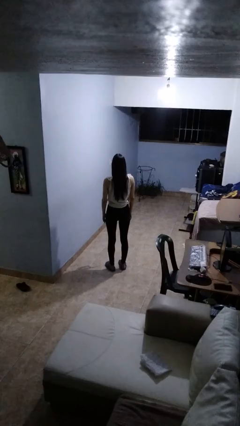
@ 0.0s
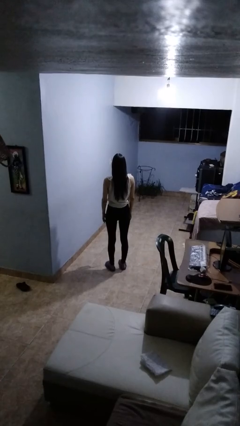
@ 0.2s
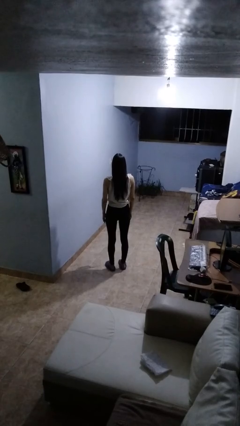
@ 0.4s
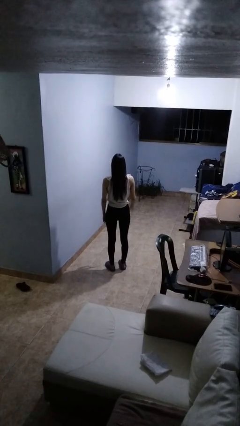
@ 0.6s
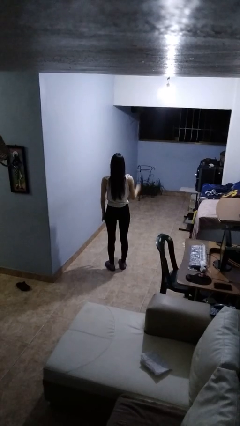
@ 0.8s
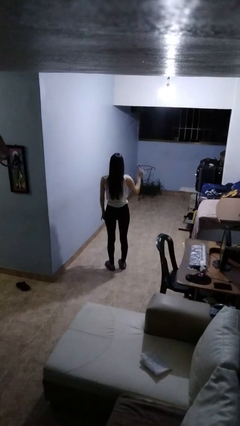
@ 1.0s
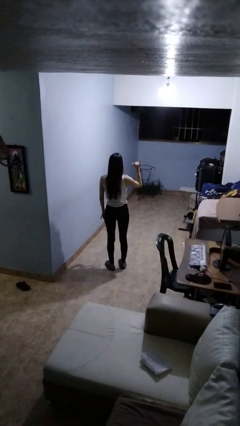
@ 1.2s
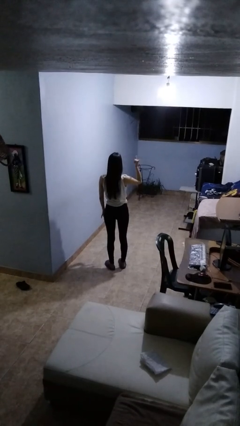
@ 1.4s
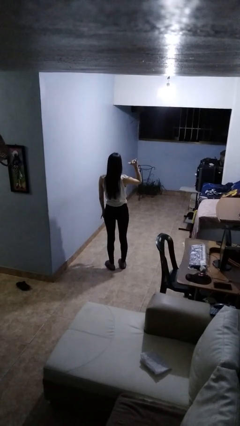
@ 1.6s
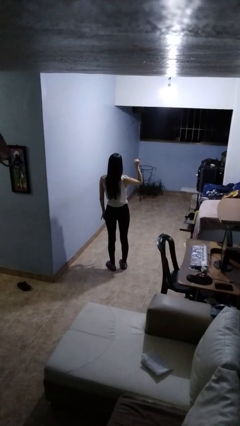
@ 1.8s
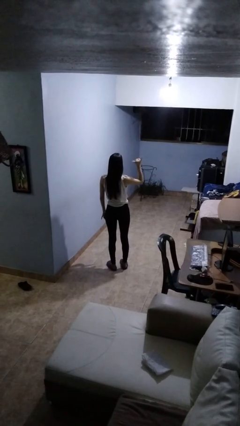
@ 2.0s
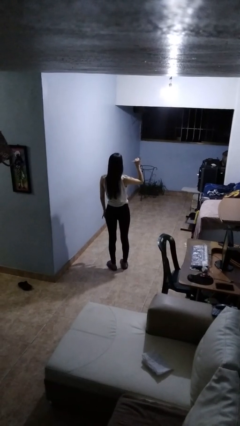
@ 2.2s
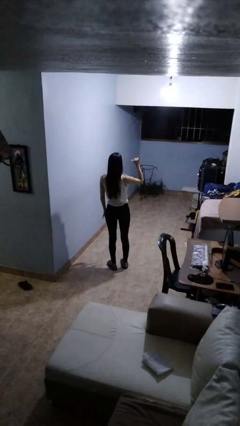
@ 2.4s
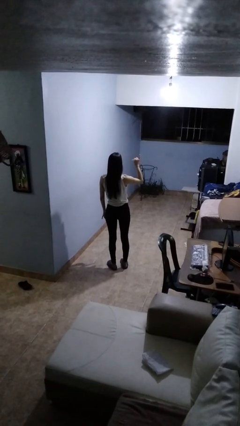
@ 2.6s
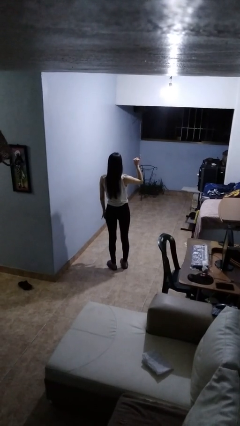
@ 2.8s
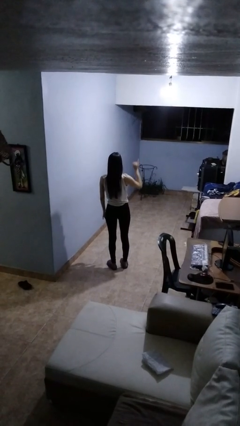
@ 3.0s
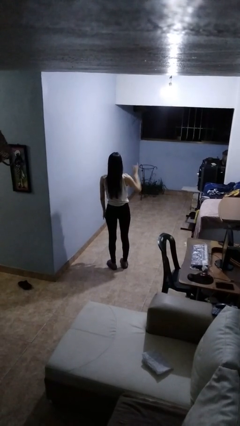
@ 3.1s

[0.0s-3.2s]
person gestures hang loose

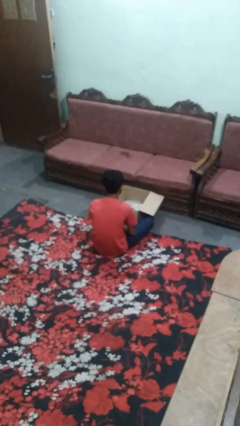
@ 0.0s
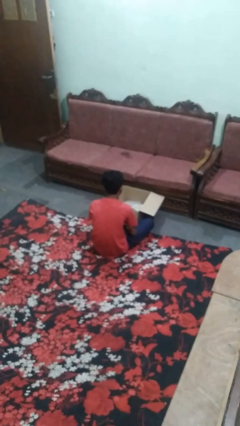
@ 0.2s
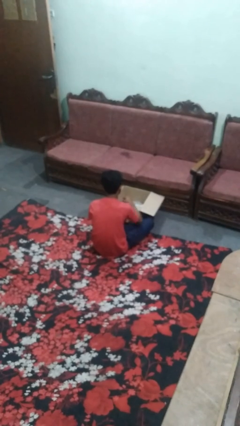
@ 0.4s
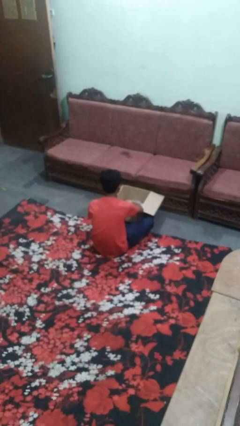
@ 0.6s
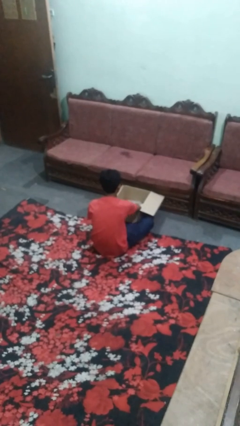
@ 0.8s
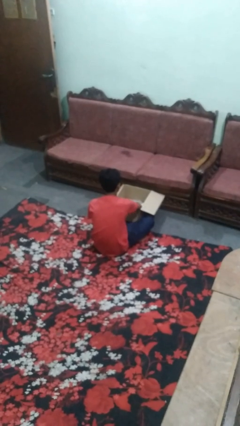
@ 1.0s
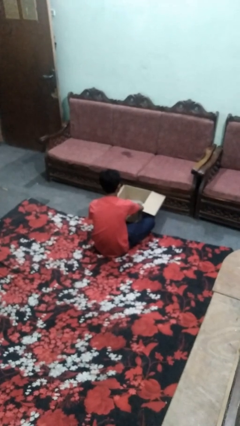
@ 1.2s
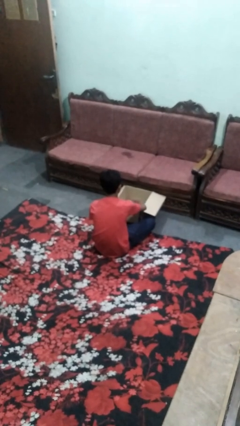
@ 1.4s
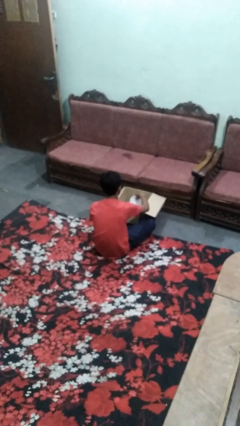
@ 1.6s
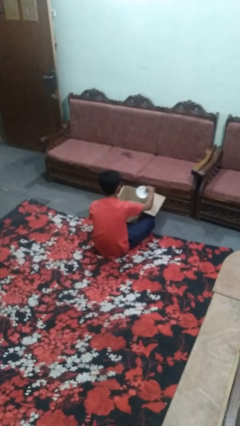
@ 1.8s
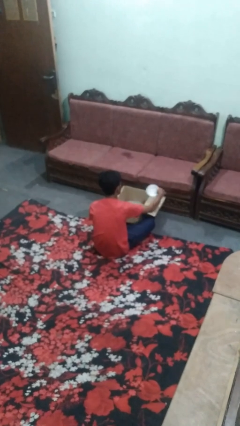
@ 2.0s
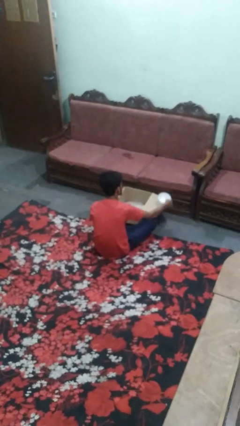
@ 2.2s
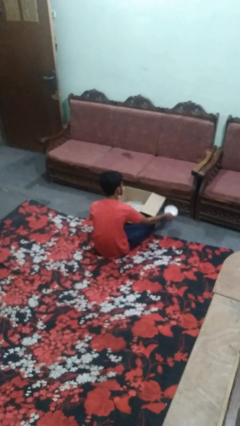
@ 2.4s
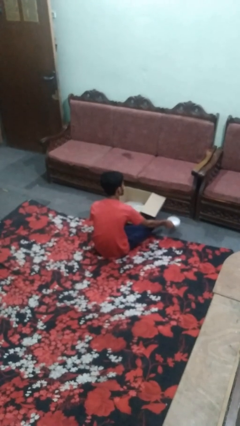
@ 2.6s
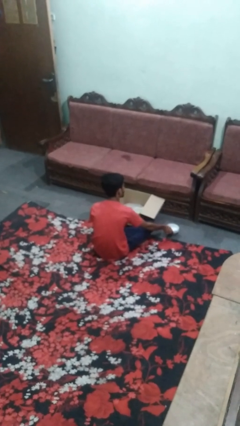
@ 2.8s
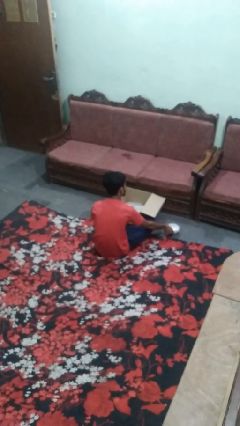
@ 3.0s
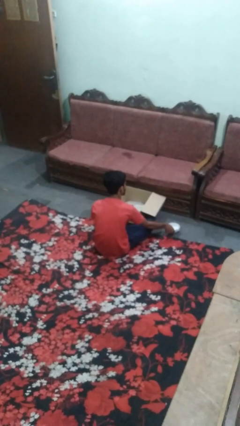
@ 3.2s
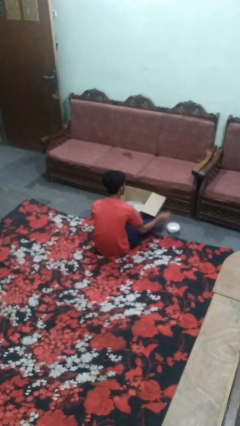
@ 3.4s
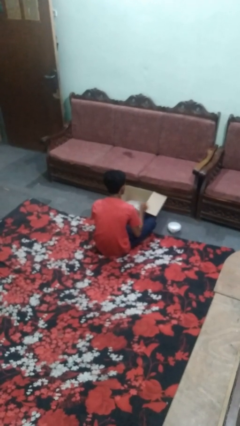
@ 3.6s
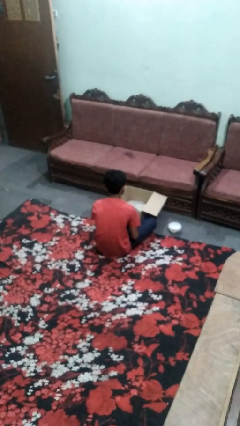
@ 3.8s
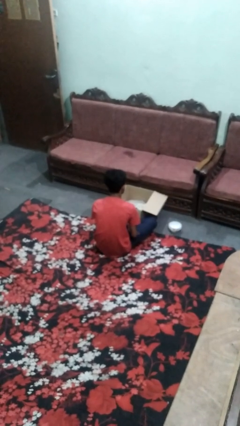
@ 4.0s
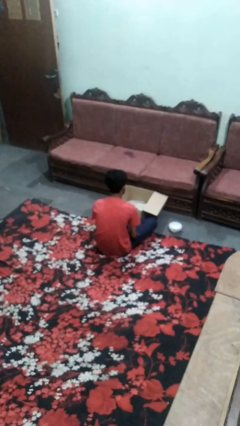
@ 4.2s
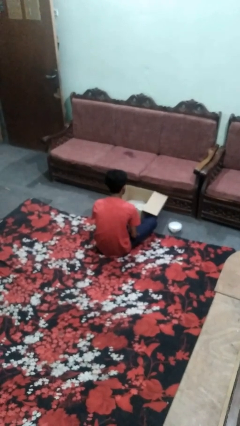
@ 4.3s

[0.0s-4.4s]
person takes object from box

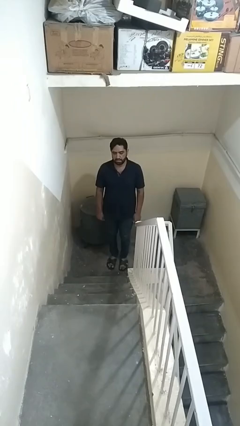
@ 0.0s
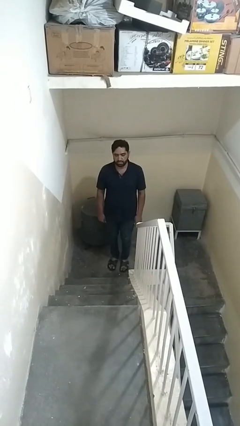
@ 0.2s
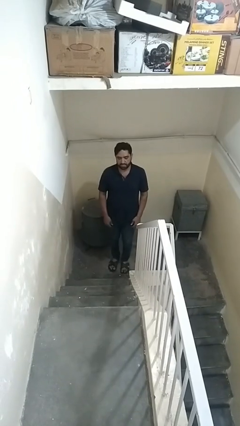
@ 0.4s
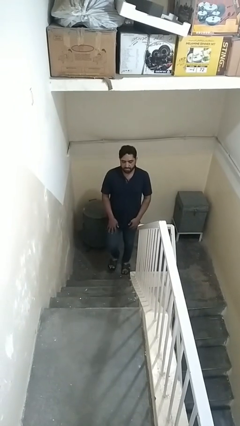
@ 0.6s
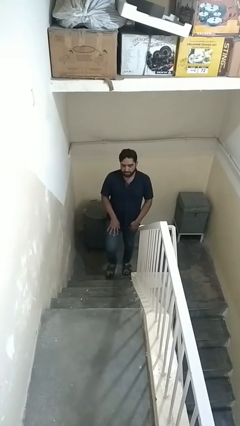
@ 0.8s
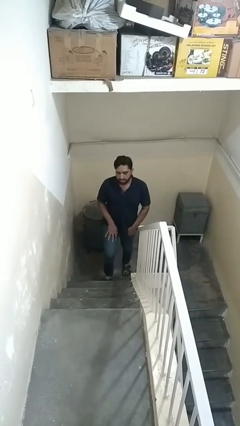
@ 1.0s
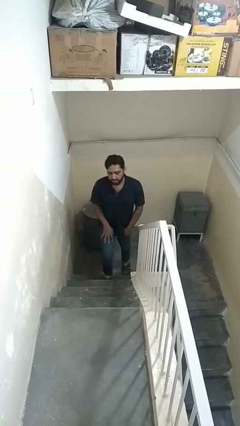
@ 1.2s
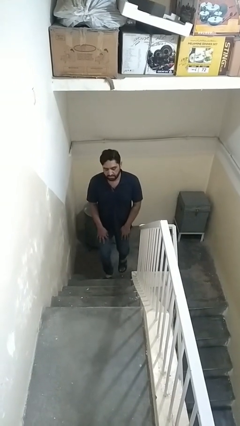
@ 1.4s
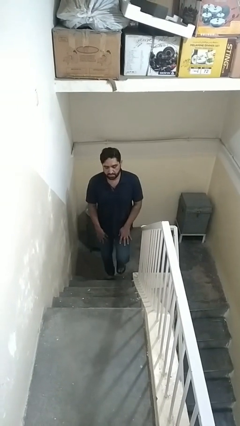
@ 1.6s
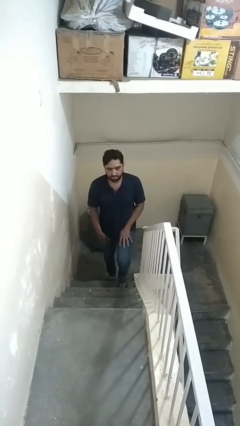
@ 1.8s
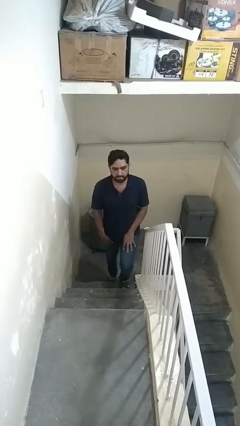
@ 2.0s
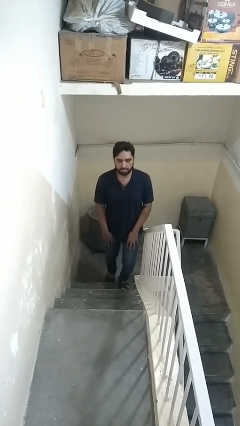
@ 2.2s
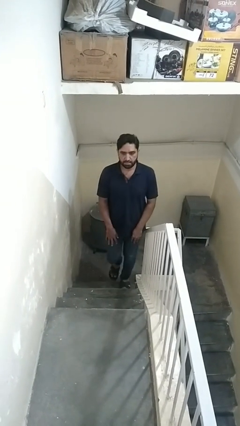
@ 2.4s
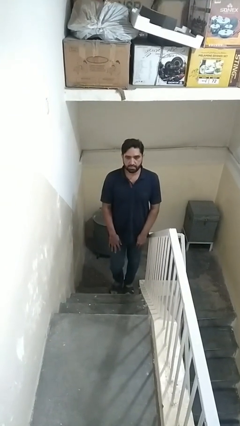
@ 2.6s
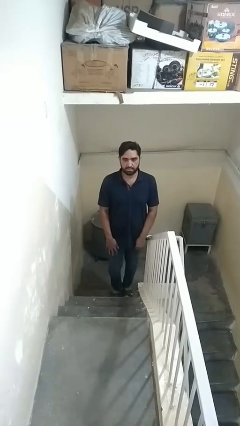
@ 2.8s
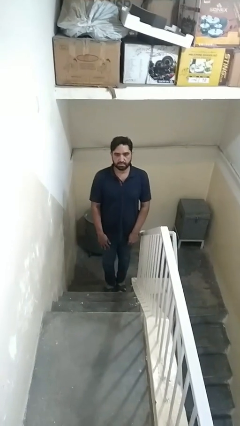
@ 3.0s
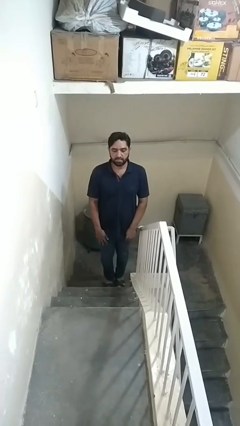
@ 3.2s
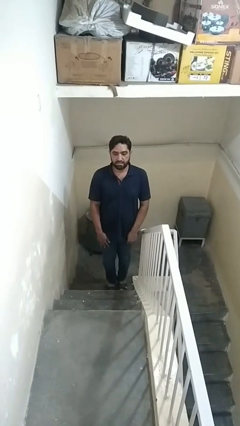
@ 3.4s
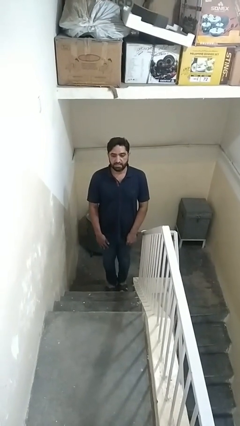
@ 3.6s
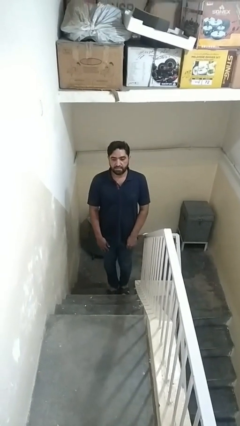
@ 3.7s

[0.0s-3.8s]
person climbs up stairs

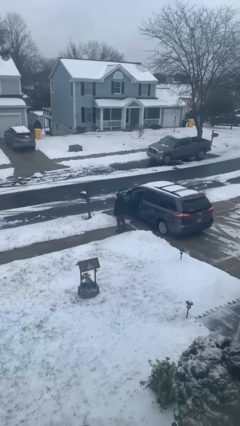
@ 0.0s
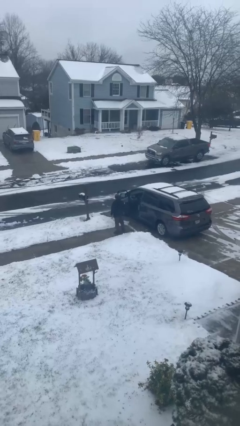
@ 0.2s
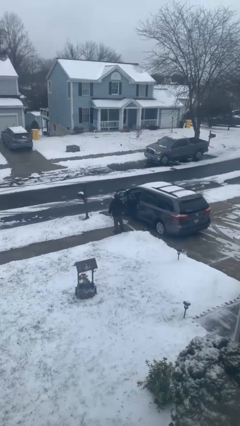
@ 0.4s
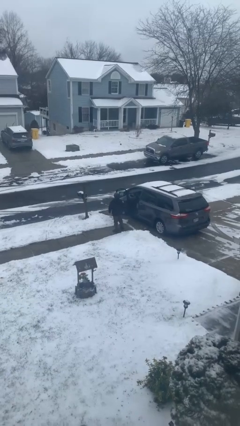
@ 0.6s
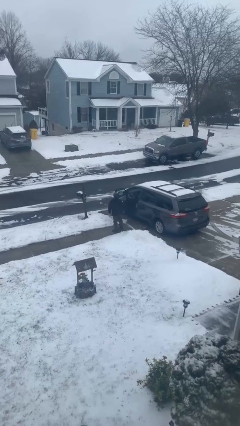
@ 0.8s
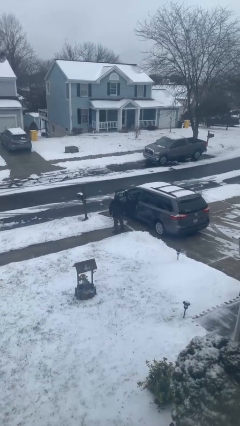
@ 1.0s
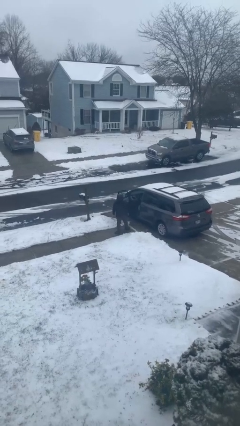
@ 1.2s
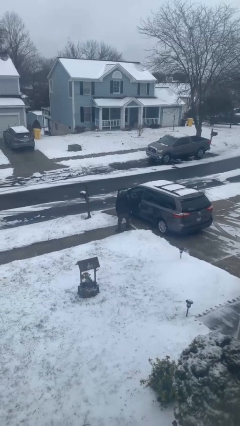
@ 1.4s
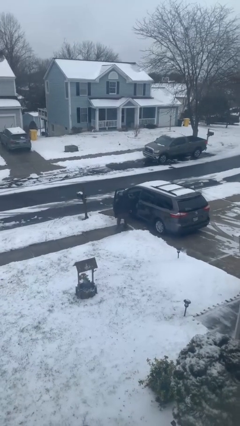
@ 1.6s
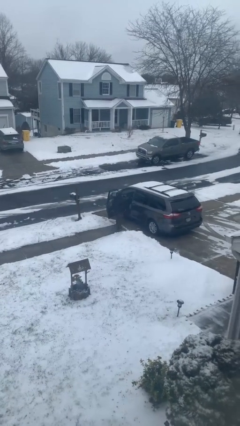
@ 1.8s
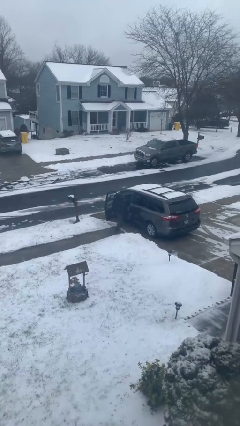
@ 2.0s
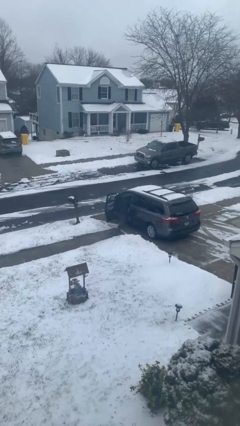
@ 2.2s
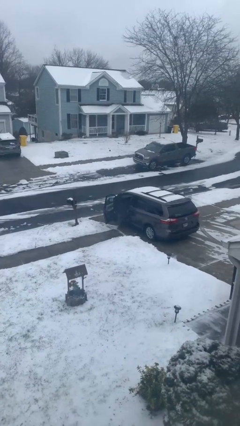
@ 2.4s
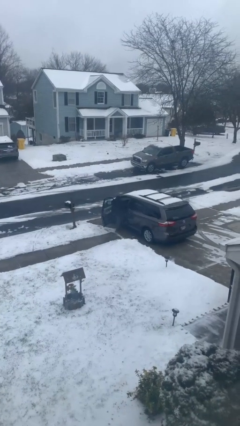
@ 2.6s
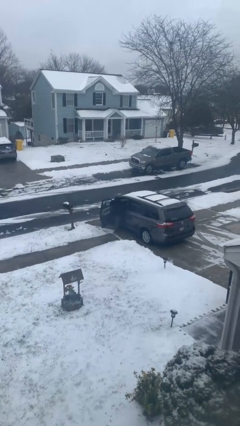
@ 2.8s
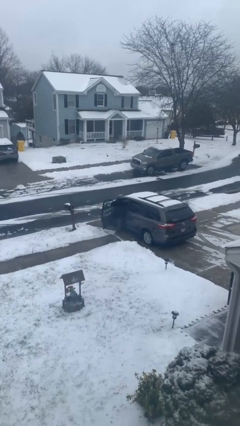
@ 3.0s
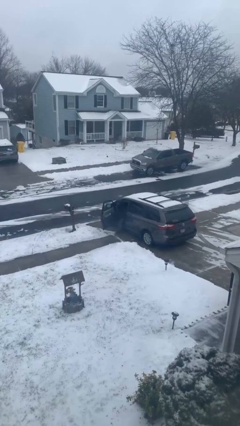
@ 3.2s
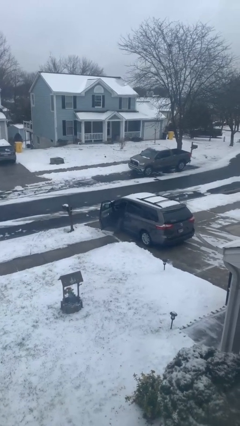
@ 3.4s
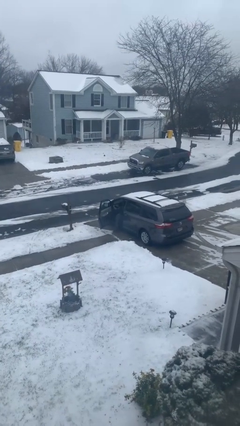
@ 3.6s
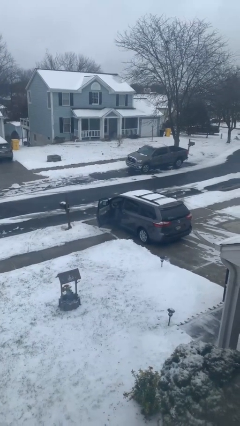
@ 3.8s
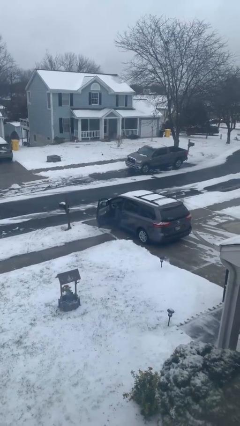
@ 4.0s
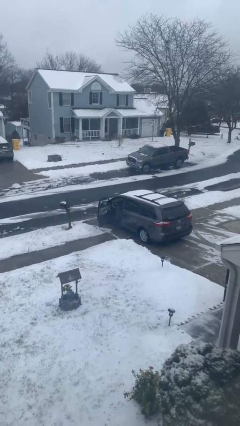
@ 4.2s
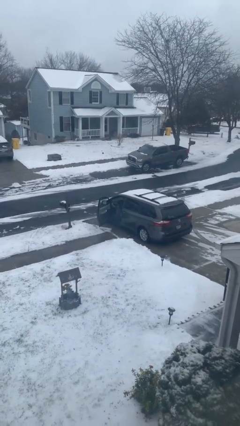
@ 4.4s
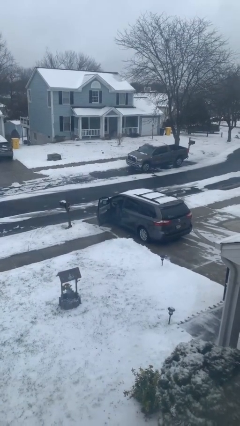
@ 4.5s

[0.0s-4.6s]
person enters car

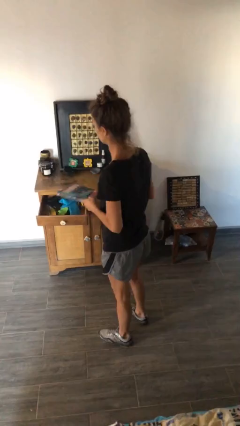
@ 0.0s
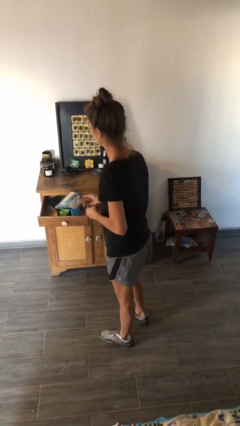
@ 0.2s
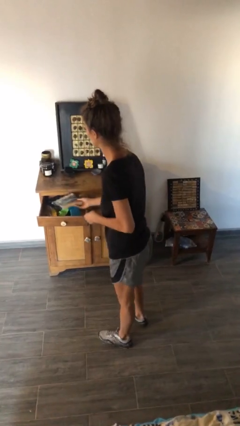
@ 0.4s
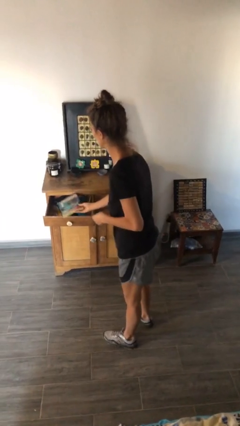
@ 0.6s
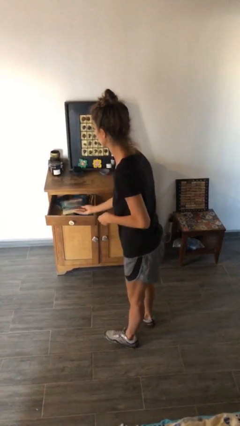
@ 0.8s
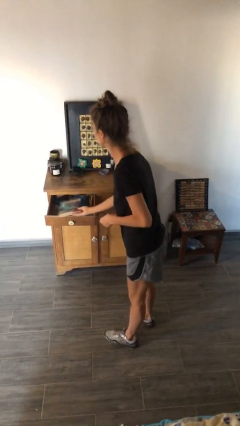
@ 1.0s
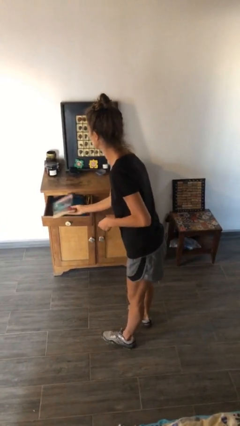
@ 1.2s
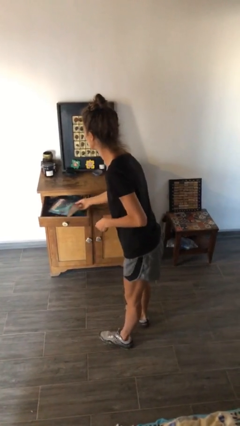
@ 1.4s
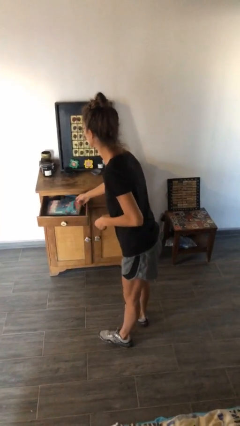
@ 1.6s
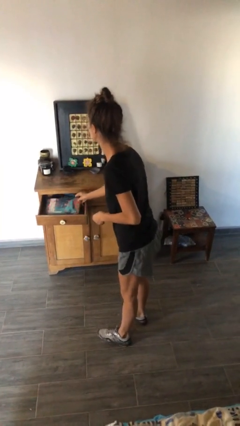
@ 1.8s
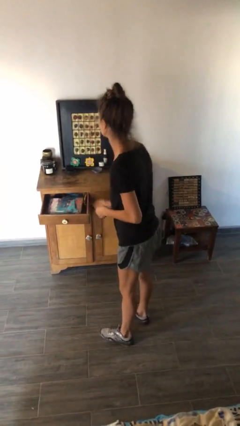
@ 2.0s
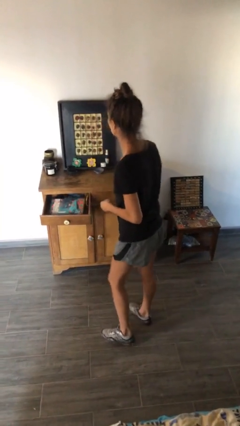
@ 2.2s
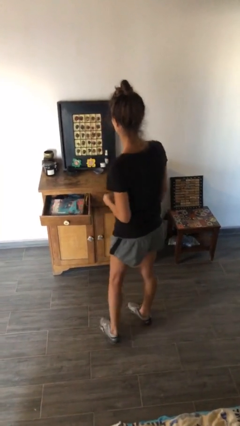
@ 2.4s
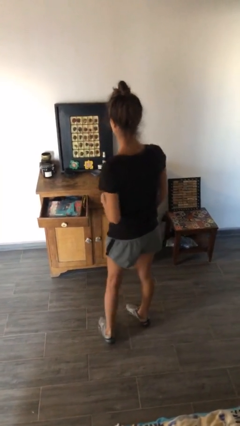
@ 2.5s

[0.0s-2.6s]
person puts down object into cabinet
